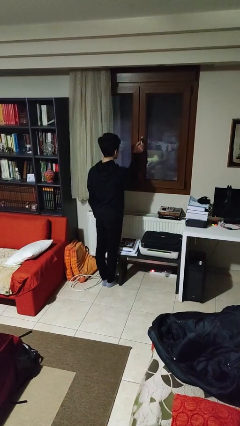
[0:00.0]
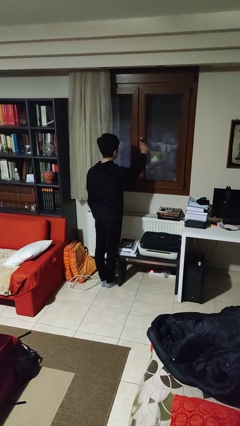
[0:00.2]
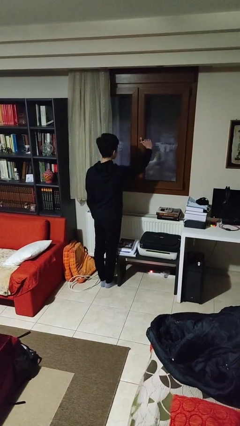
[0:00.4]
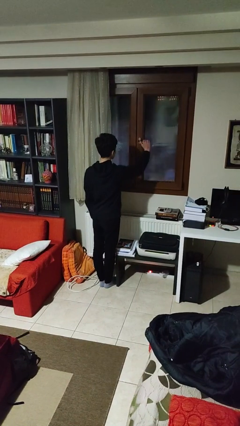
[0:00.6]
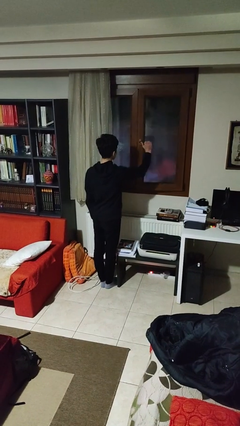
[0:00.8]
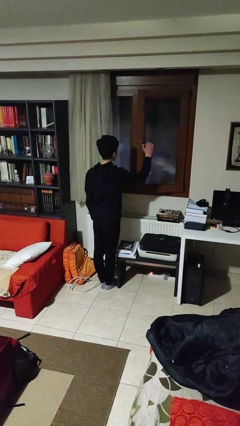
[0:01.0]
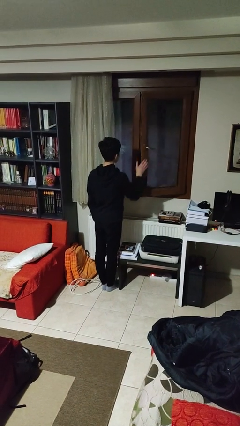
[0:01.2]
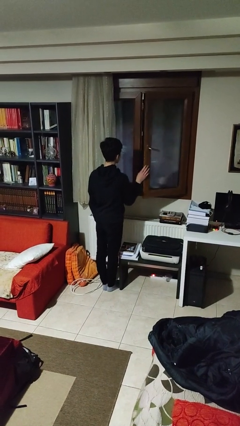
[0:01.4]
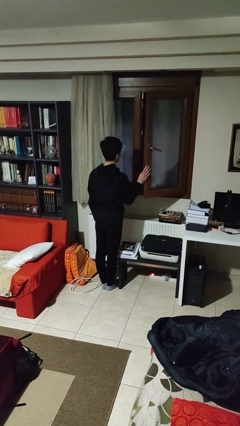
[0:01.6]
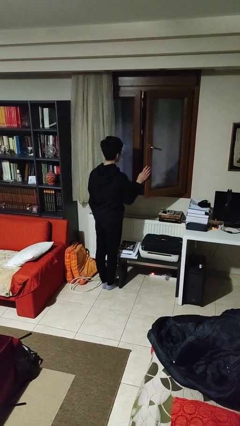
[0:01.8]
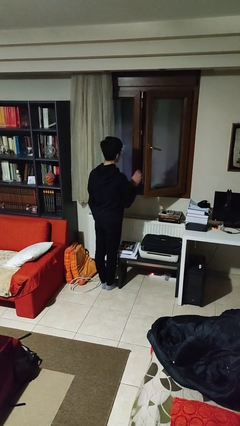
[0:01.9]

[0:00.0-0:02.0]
person opens home window

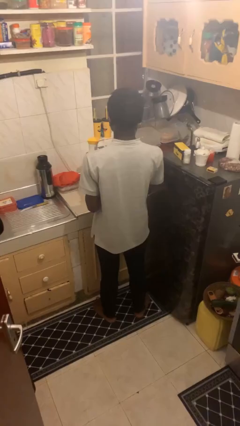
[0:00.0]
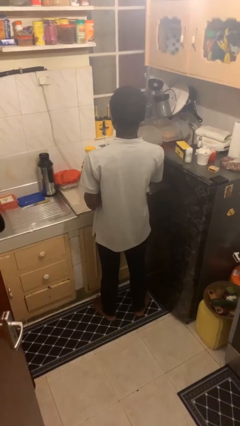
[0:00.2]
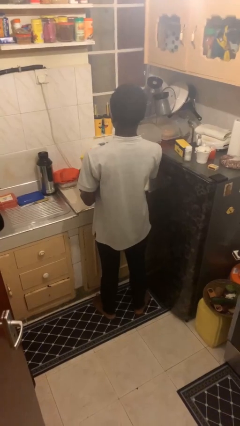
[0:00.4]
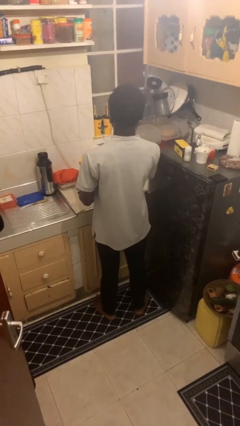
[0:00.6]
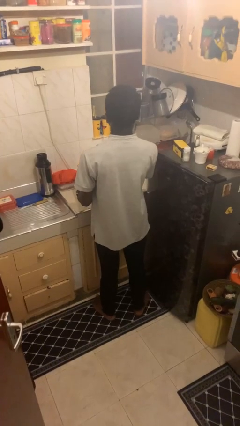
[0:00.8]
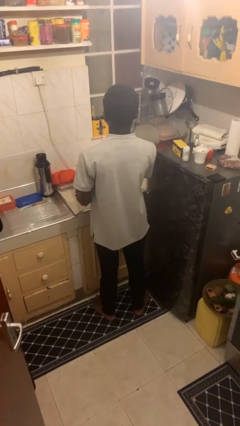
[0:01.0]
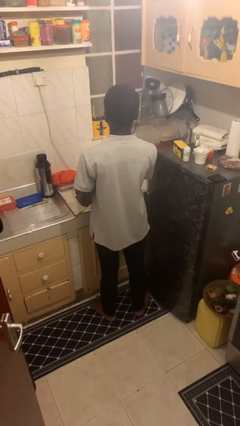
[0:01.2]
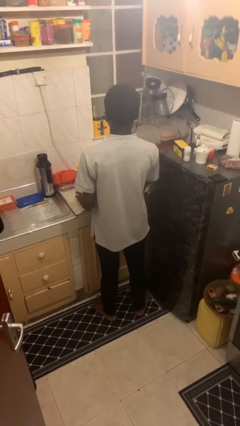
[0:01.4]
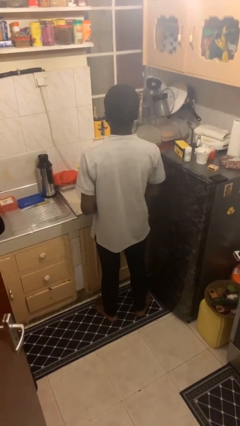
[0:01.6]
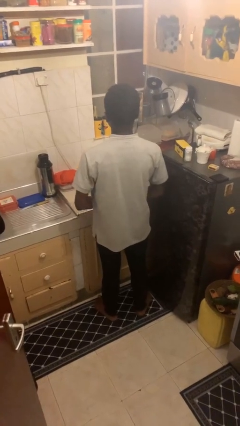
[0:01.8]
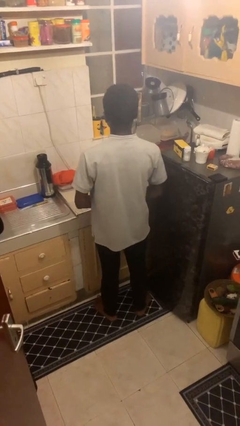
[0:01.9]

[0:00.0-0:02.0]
person puts down object on countertop

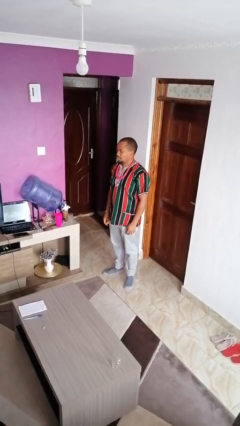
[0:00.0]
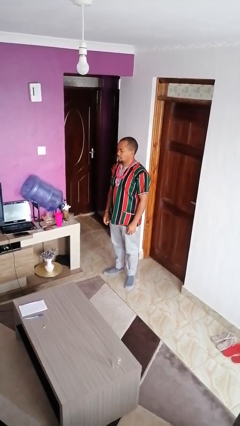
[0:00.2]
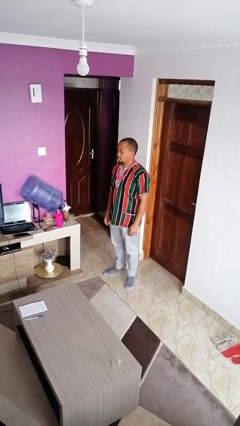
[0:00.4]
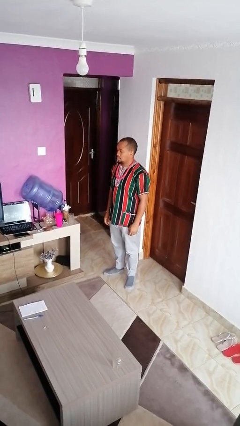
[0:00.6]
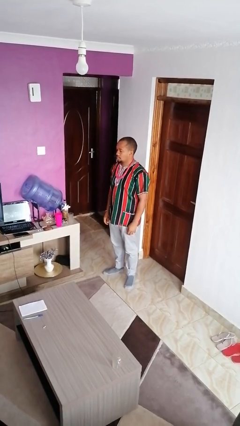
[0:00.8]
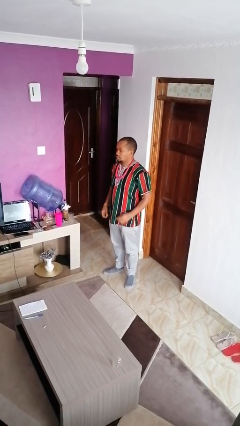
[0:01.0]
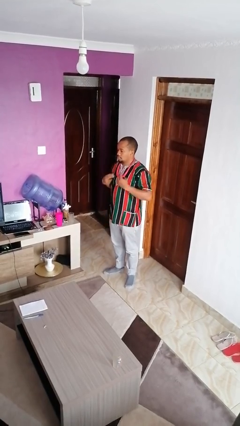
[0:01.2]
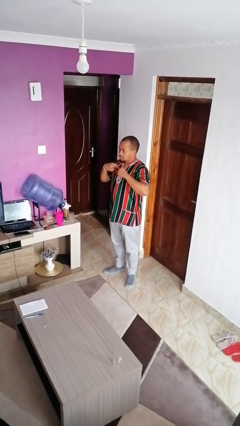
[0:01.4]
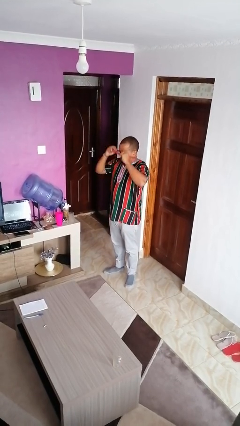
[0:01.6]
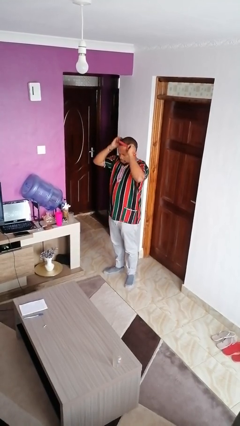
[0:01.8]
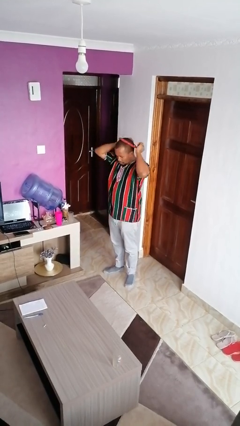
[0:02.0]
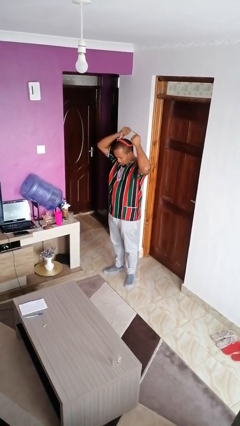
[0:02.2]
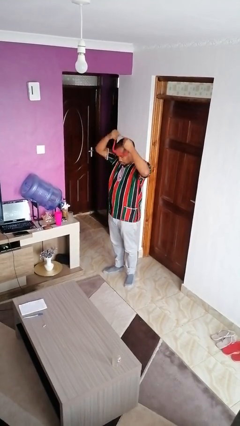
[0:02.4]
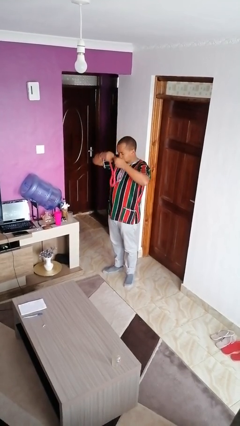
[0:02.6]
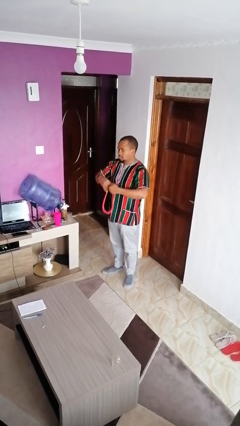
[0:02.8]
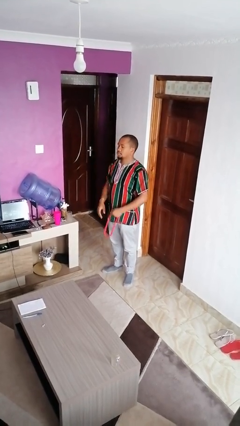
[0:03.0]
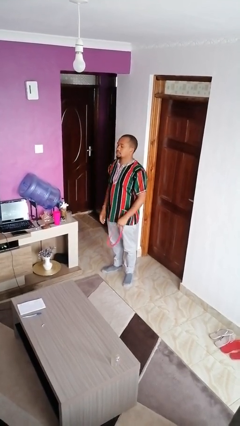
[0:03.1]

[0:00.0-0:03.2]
person takes off necklace

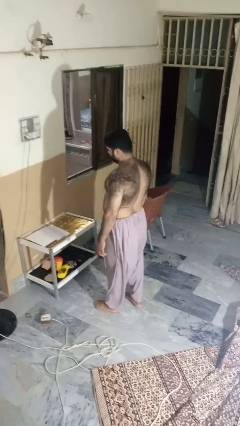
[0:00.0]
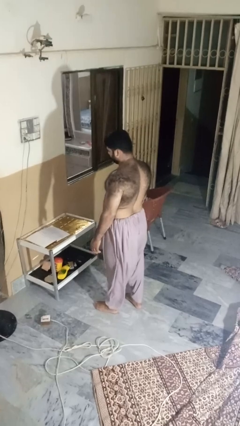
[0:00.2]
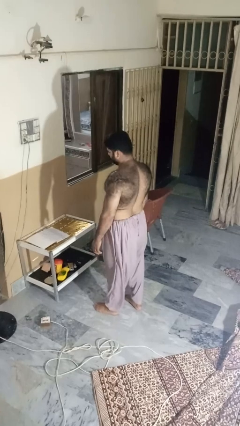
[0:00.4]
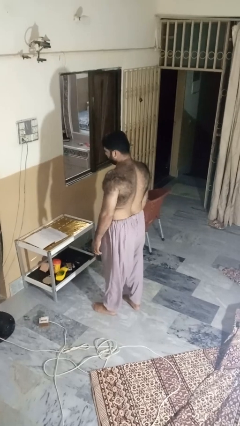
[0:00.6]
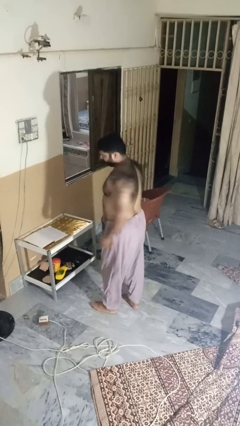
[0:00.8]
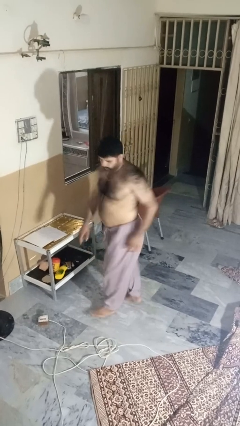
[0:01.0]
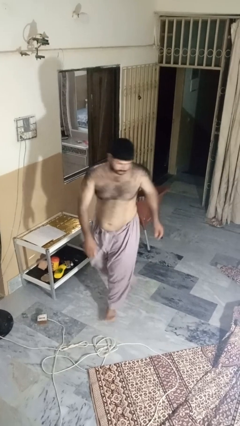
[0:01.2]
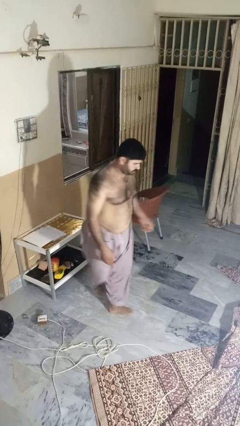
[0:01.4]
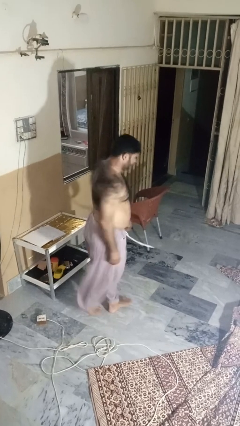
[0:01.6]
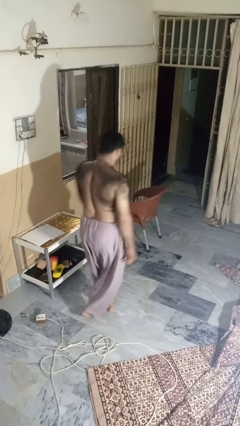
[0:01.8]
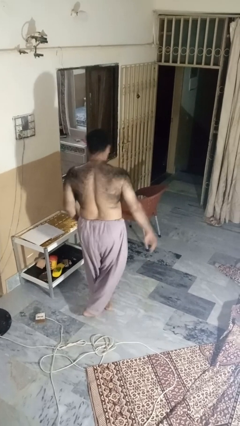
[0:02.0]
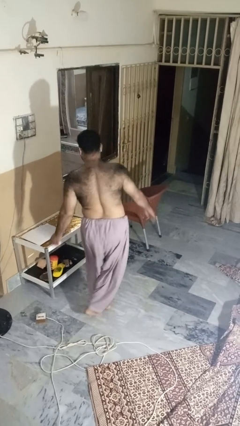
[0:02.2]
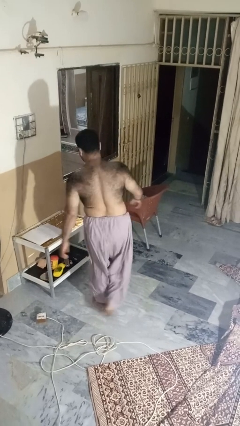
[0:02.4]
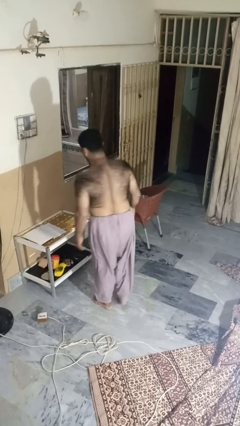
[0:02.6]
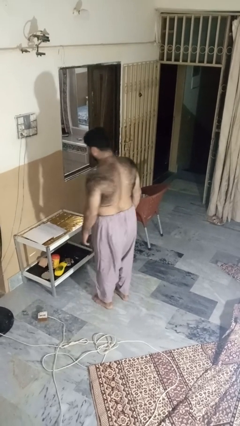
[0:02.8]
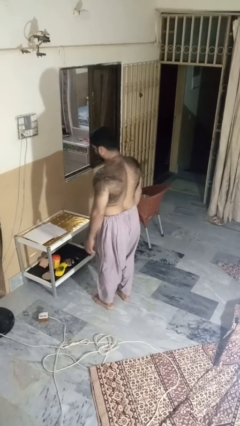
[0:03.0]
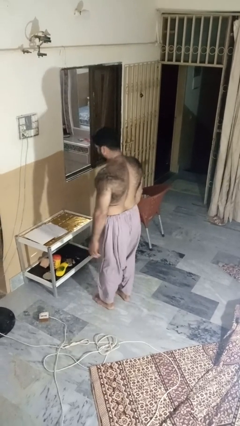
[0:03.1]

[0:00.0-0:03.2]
person twirls

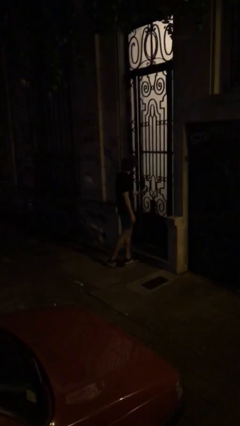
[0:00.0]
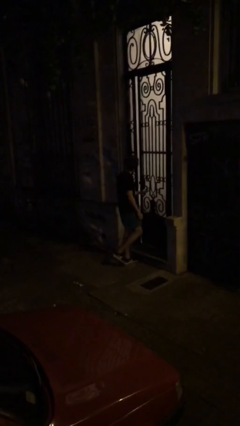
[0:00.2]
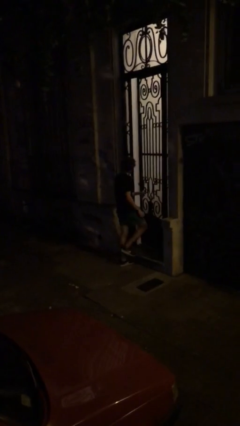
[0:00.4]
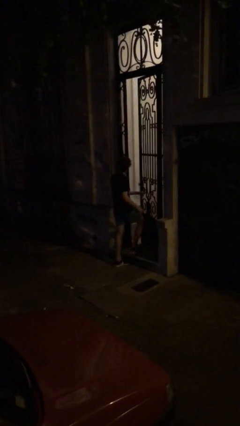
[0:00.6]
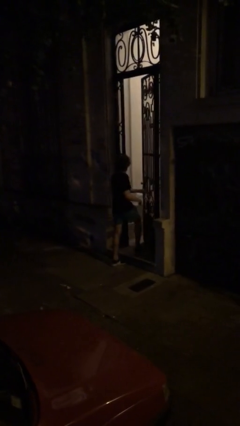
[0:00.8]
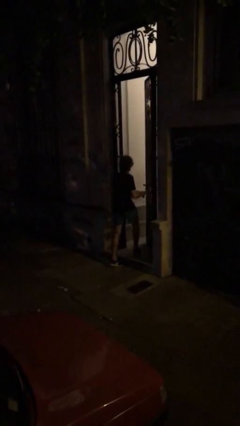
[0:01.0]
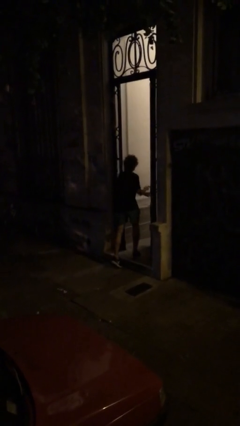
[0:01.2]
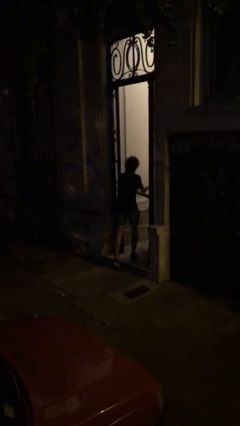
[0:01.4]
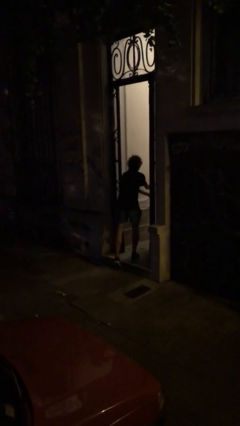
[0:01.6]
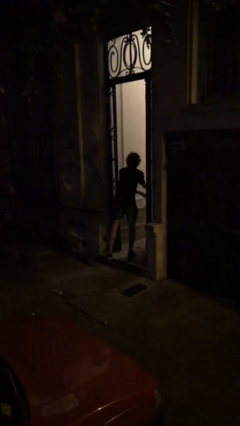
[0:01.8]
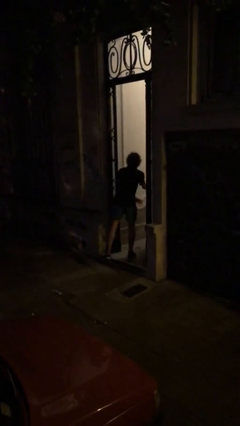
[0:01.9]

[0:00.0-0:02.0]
person opens facility door

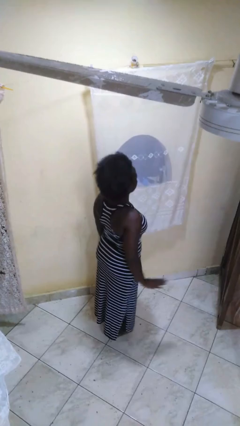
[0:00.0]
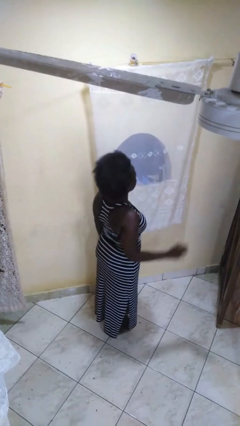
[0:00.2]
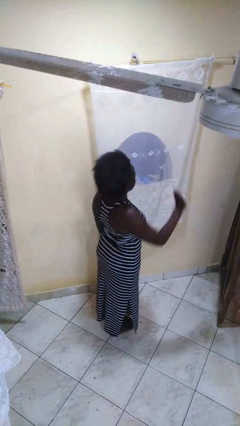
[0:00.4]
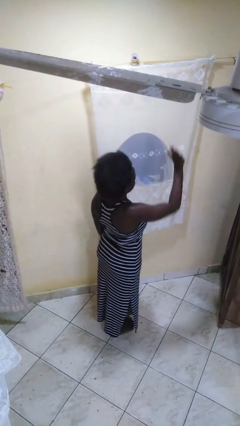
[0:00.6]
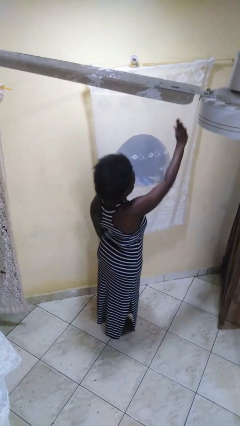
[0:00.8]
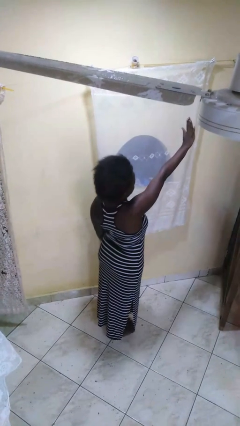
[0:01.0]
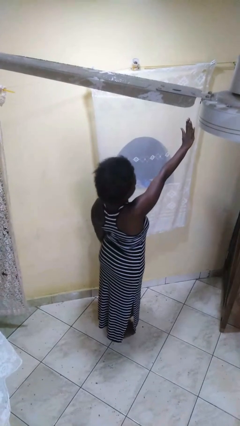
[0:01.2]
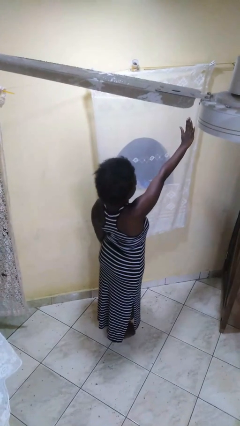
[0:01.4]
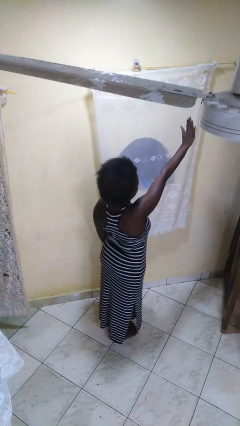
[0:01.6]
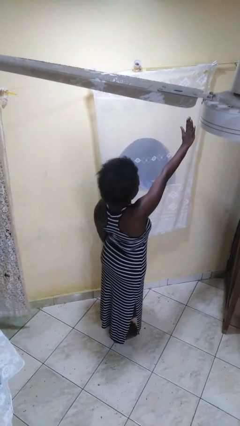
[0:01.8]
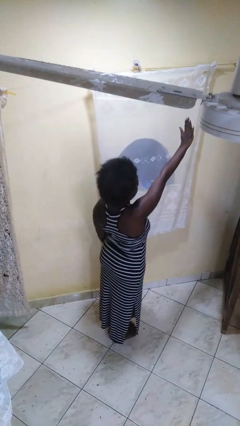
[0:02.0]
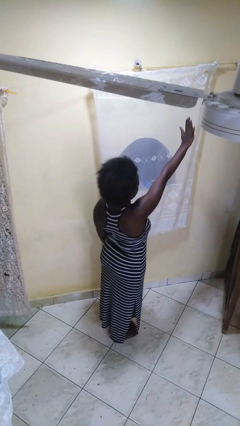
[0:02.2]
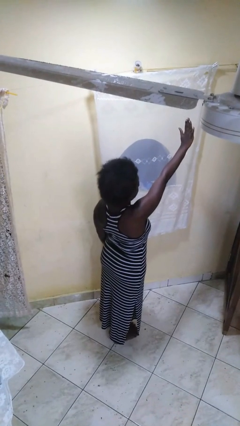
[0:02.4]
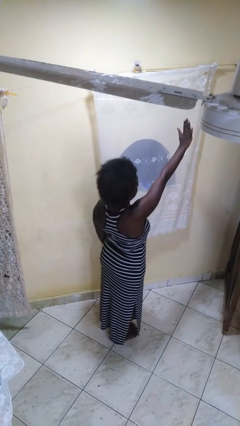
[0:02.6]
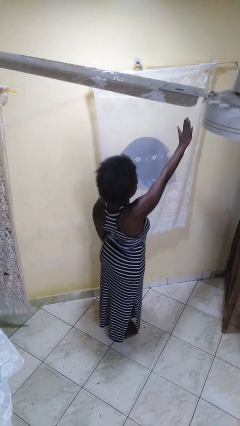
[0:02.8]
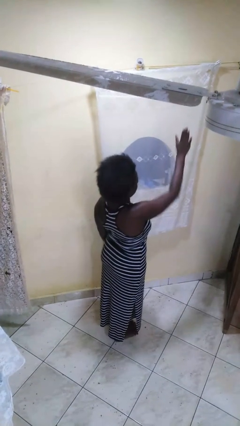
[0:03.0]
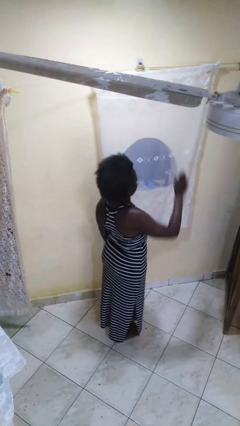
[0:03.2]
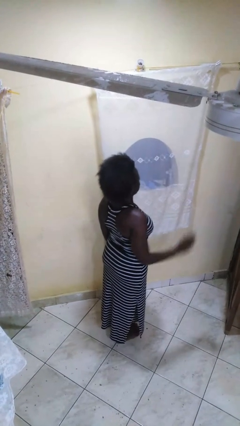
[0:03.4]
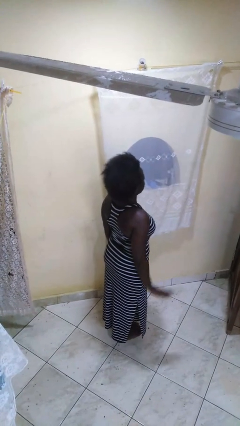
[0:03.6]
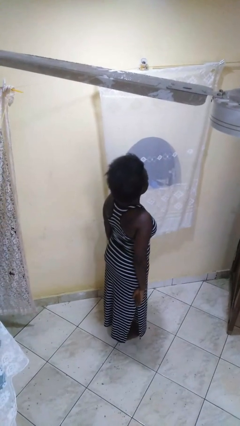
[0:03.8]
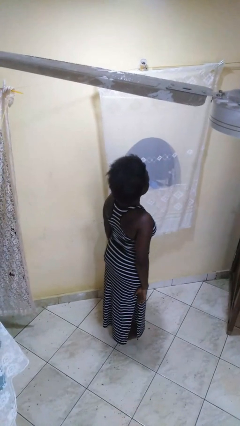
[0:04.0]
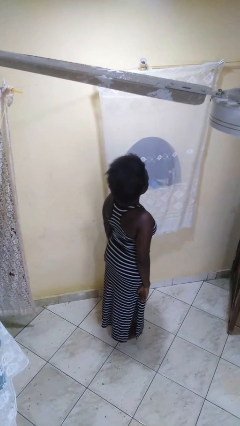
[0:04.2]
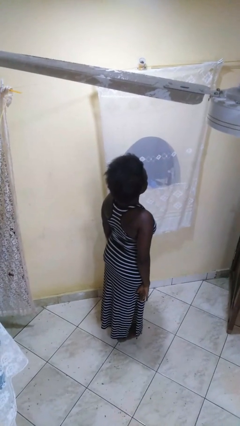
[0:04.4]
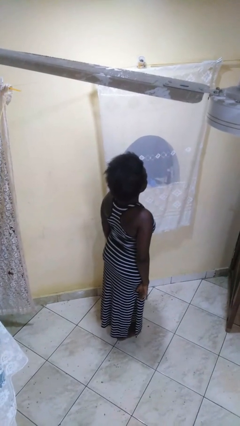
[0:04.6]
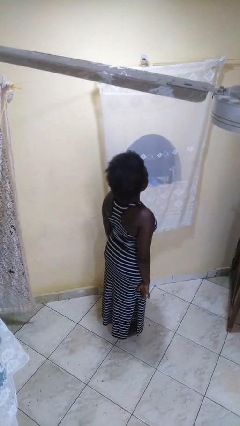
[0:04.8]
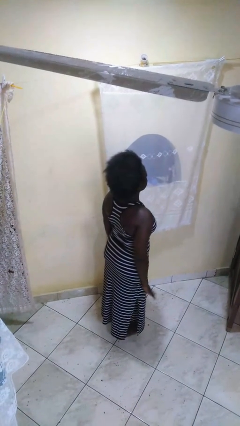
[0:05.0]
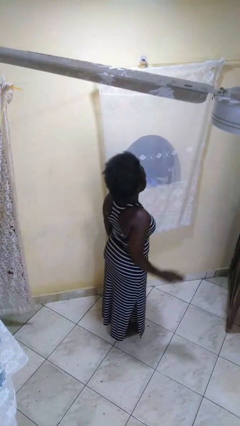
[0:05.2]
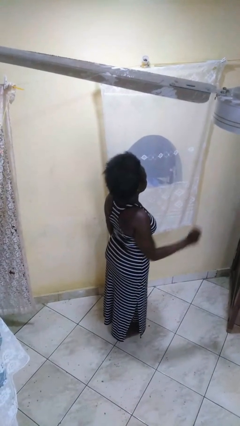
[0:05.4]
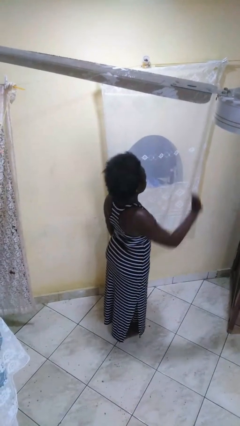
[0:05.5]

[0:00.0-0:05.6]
person gestures stop
